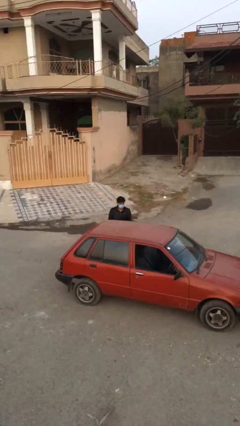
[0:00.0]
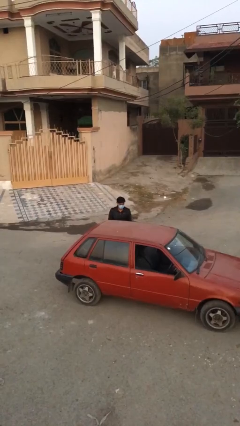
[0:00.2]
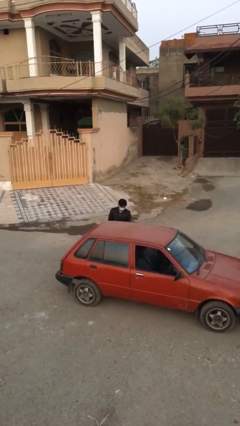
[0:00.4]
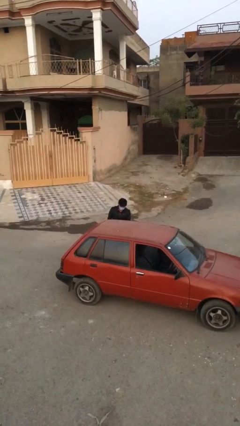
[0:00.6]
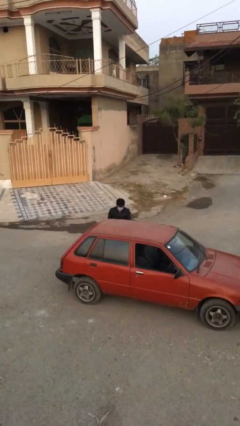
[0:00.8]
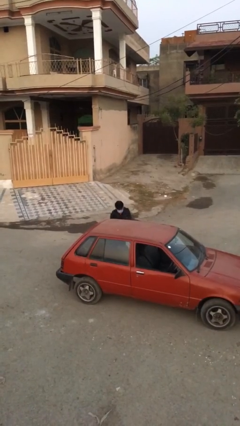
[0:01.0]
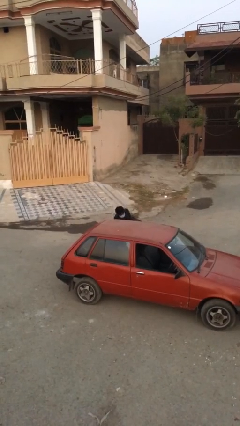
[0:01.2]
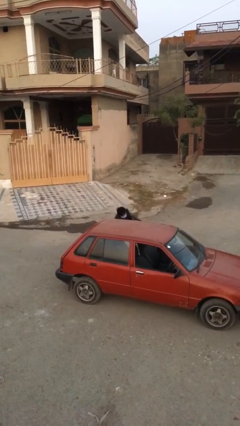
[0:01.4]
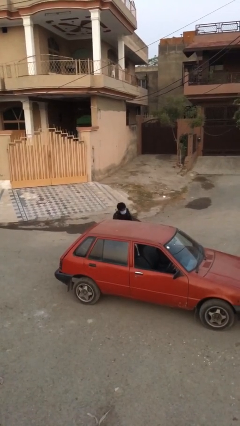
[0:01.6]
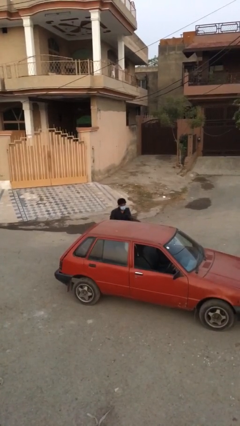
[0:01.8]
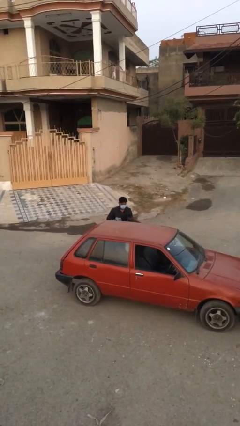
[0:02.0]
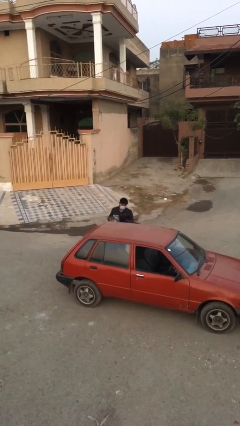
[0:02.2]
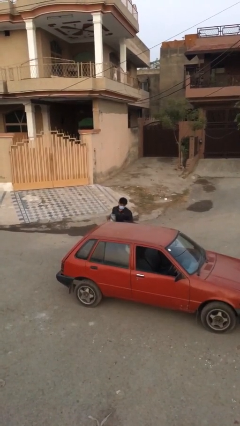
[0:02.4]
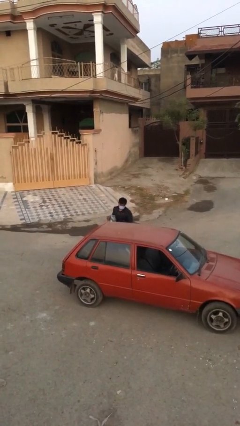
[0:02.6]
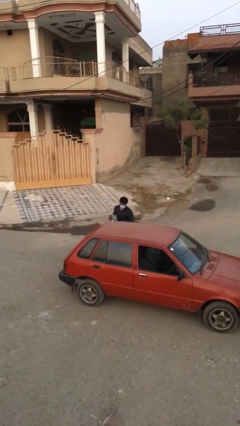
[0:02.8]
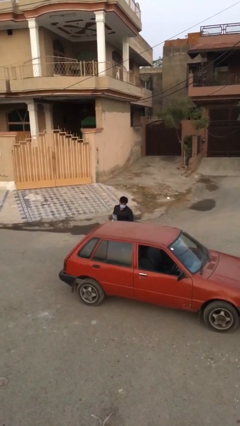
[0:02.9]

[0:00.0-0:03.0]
person unloads car

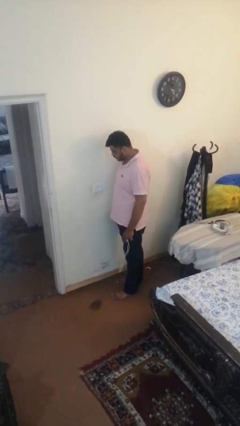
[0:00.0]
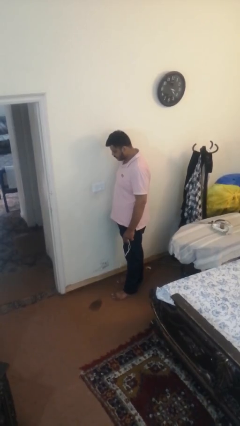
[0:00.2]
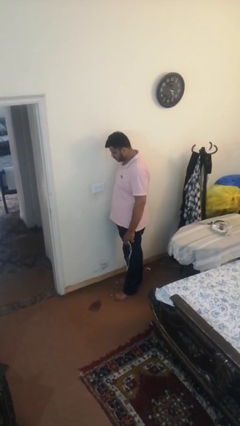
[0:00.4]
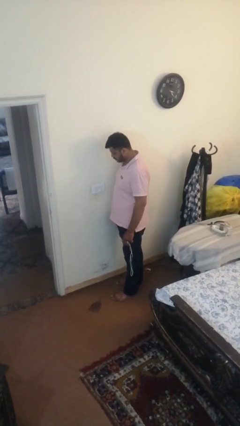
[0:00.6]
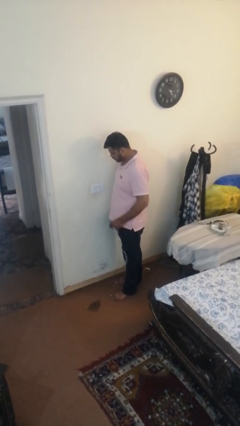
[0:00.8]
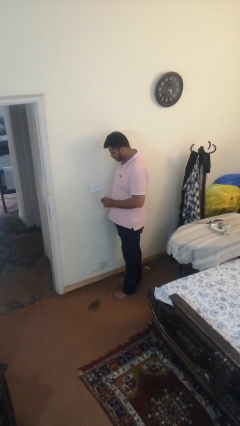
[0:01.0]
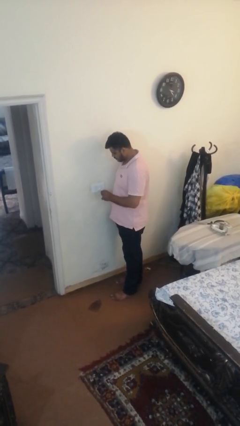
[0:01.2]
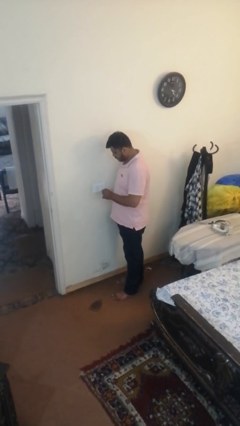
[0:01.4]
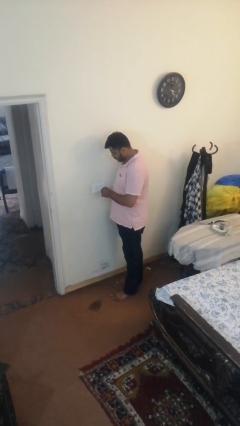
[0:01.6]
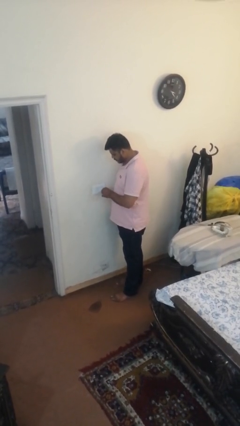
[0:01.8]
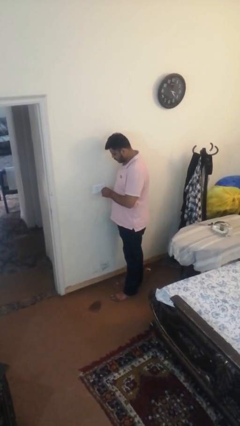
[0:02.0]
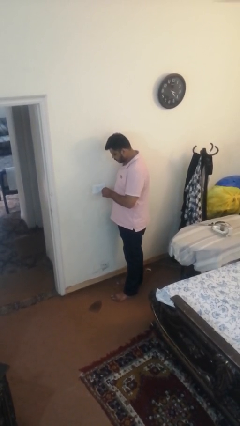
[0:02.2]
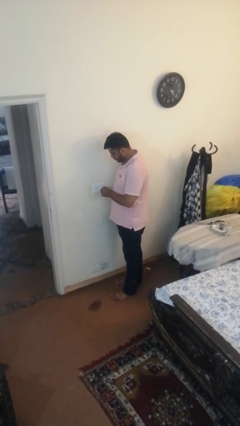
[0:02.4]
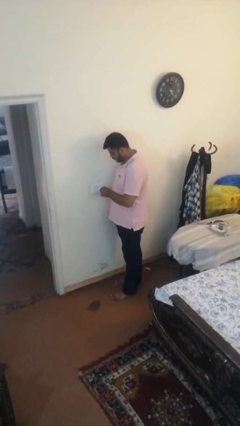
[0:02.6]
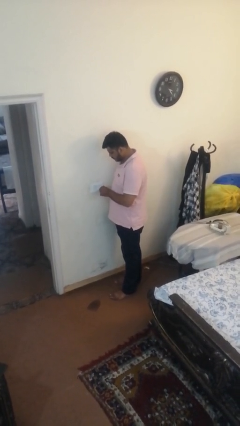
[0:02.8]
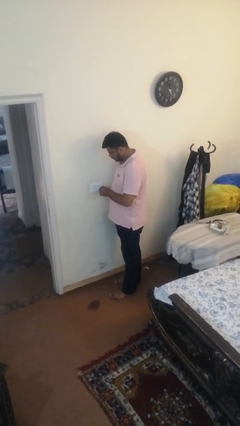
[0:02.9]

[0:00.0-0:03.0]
person plugs into electrical socket

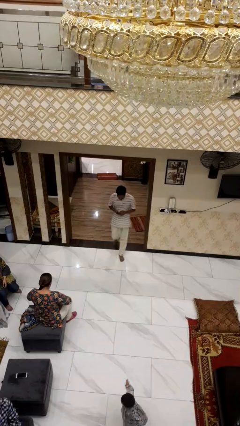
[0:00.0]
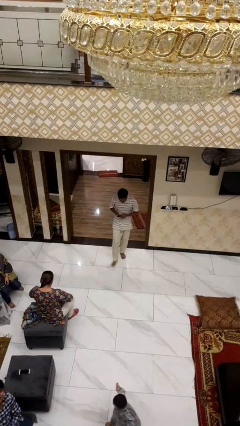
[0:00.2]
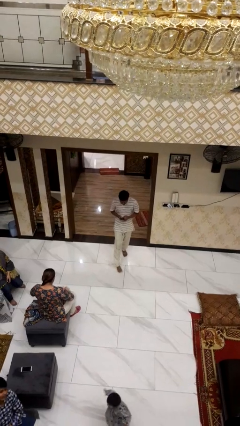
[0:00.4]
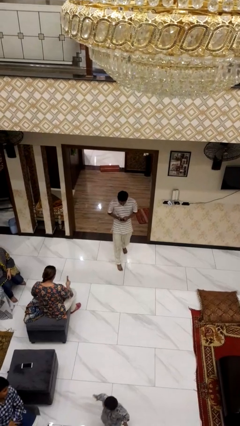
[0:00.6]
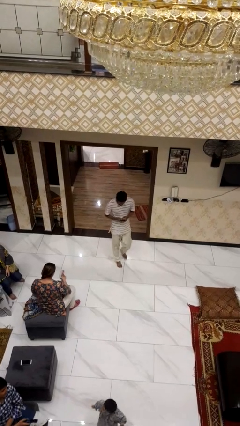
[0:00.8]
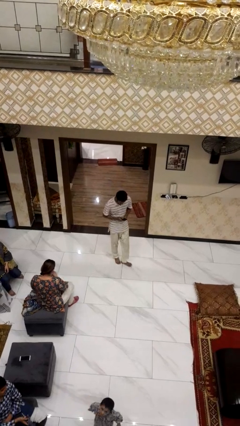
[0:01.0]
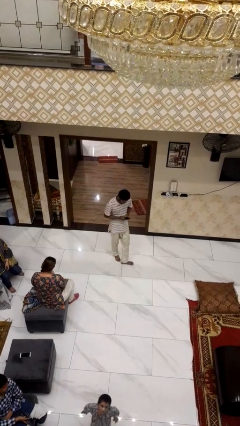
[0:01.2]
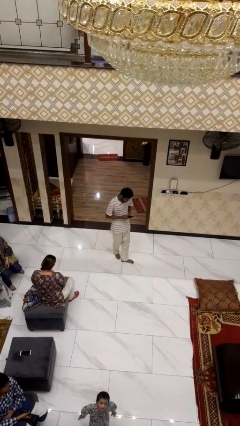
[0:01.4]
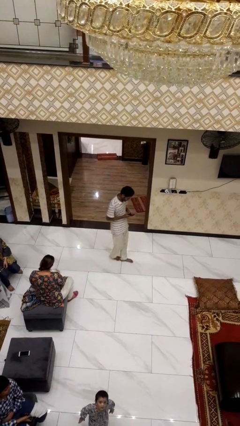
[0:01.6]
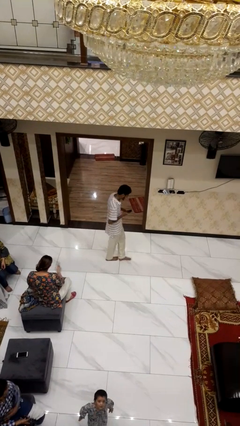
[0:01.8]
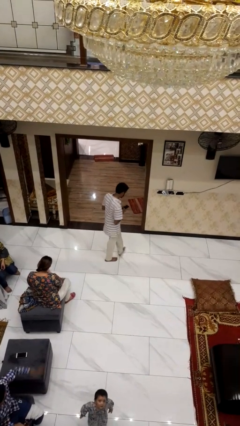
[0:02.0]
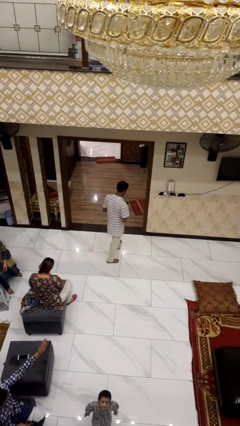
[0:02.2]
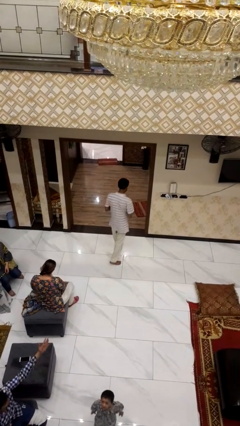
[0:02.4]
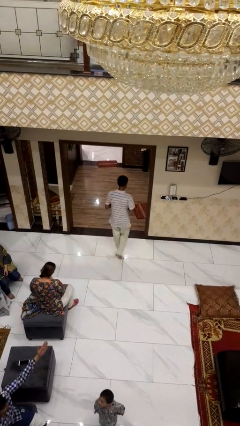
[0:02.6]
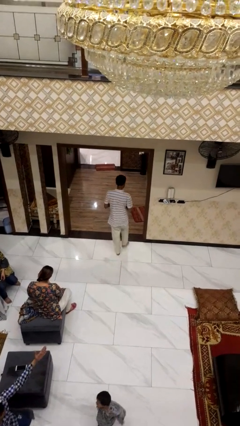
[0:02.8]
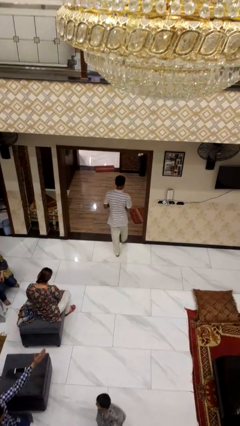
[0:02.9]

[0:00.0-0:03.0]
person enters scene through structure

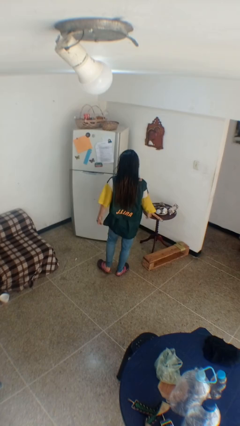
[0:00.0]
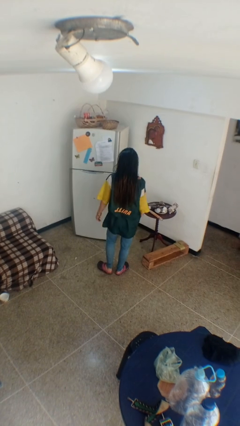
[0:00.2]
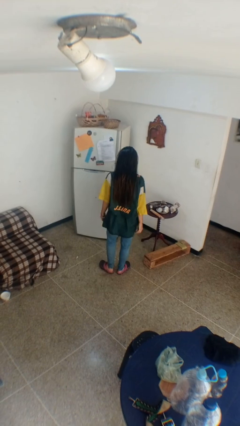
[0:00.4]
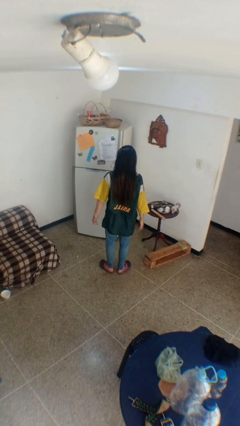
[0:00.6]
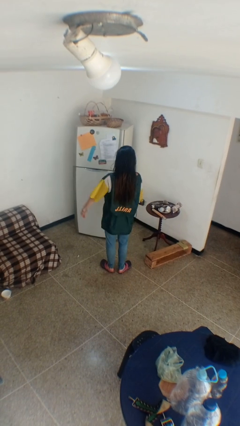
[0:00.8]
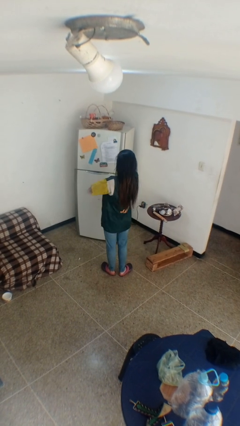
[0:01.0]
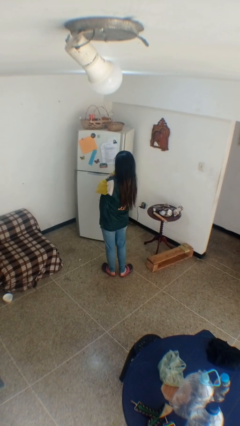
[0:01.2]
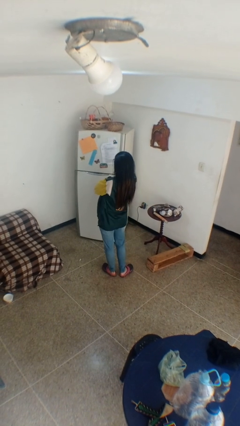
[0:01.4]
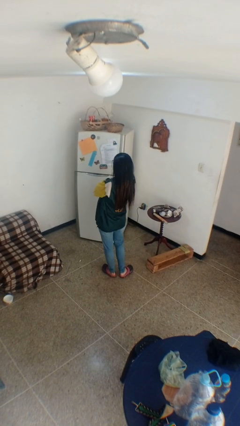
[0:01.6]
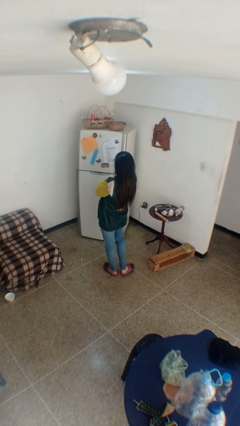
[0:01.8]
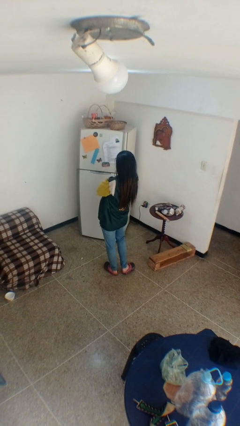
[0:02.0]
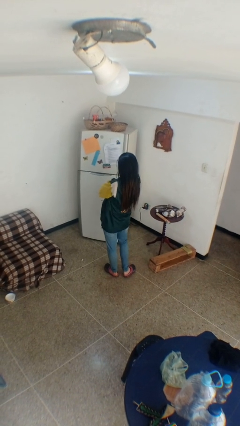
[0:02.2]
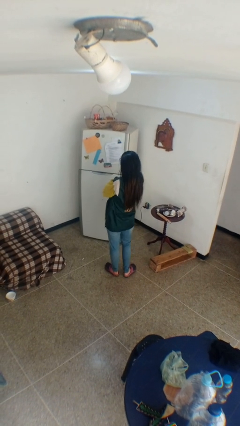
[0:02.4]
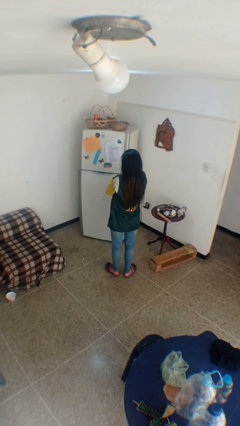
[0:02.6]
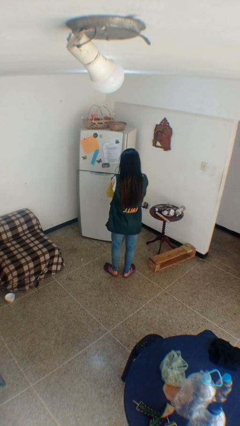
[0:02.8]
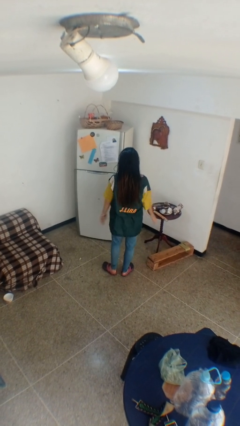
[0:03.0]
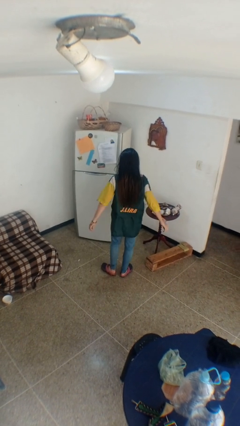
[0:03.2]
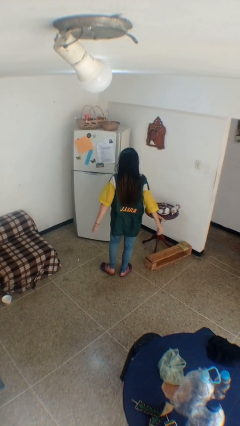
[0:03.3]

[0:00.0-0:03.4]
person gestures arms x

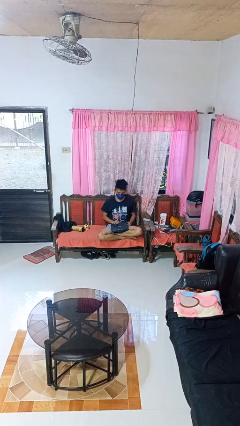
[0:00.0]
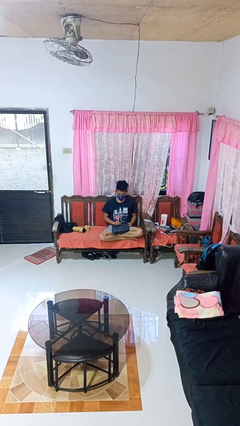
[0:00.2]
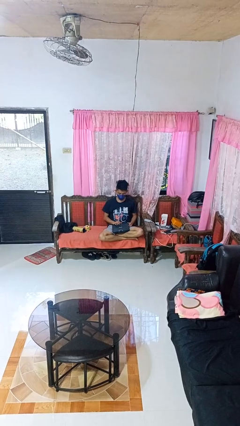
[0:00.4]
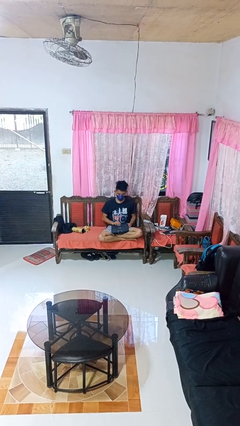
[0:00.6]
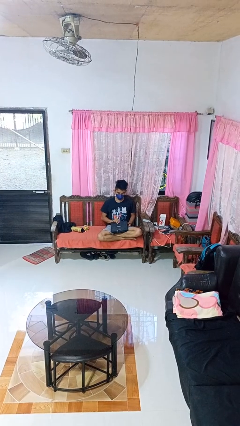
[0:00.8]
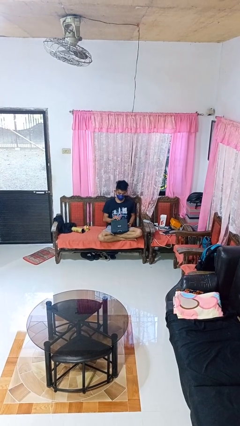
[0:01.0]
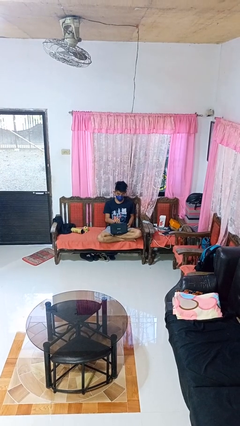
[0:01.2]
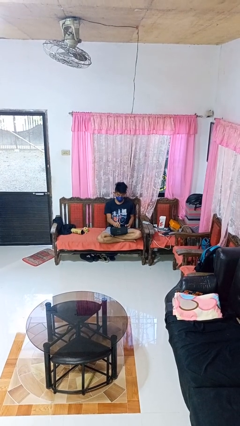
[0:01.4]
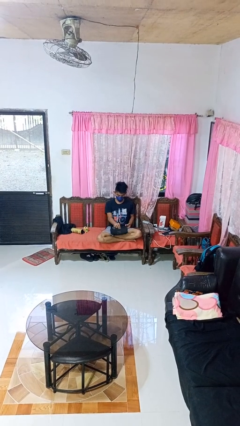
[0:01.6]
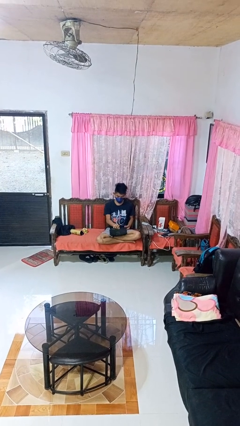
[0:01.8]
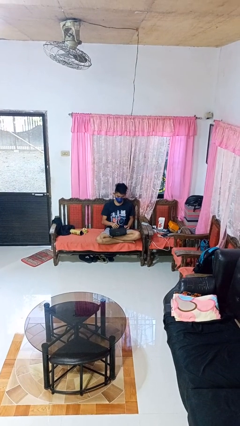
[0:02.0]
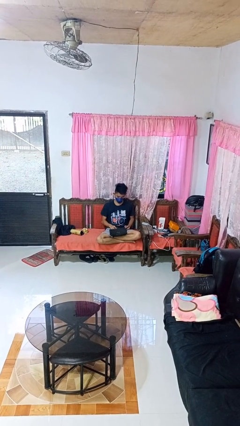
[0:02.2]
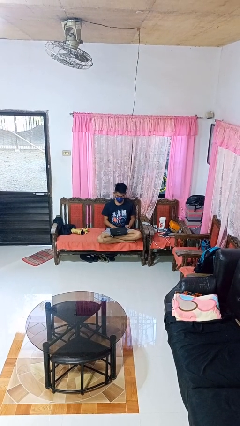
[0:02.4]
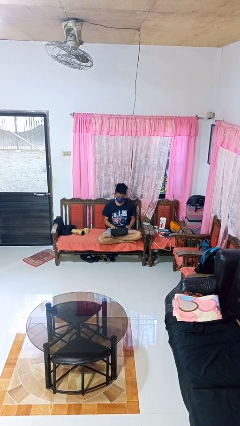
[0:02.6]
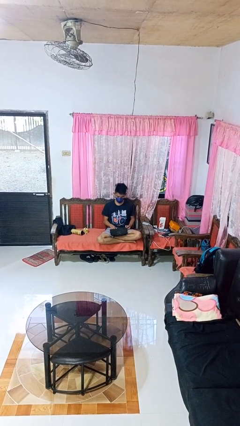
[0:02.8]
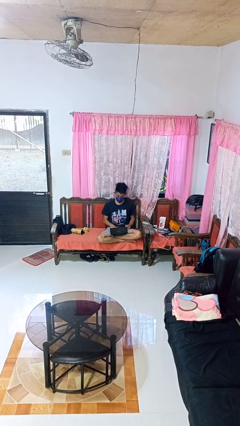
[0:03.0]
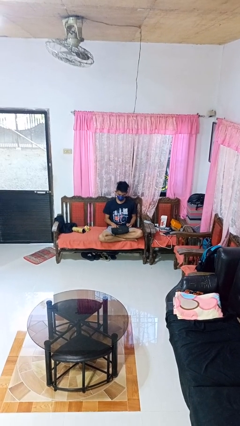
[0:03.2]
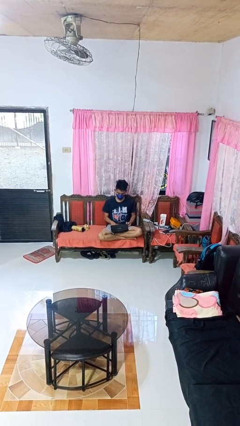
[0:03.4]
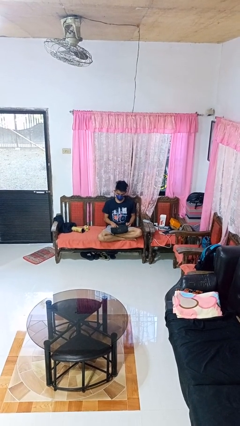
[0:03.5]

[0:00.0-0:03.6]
person opens laptop

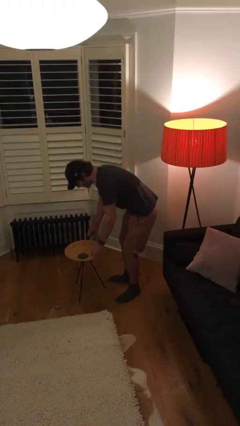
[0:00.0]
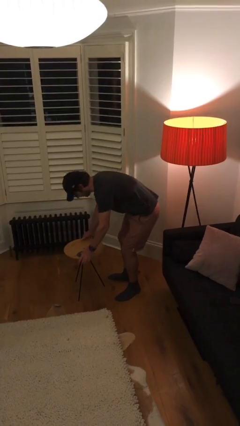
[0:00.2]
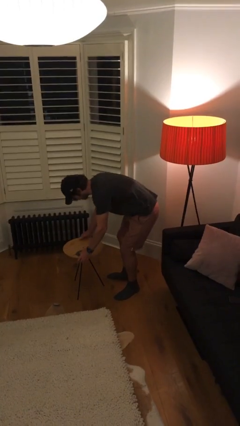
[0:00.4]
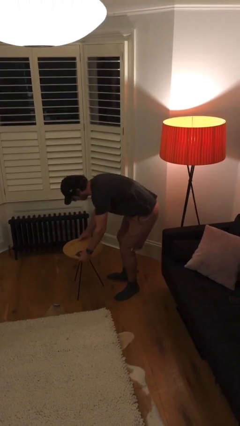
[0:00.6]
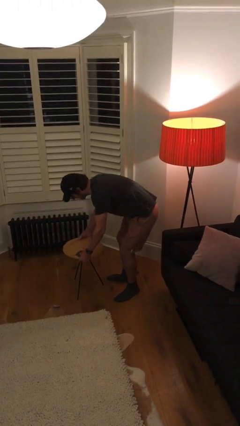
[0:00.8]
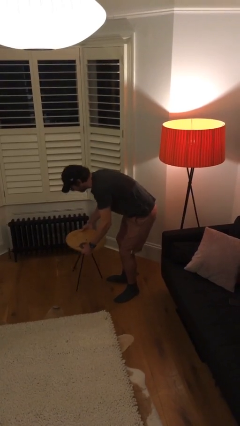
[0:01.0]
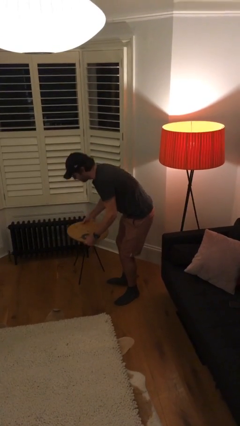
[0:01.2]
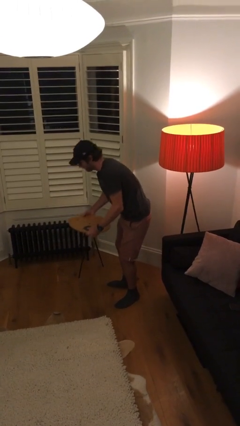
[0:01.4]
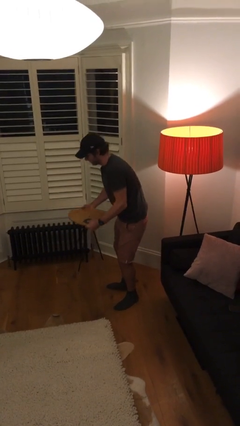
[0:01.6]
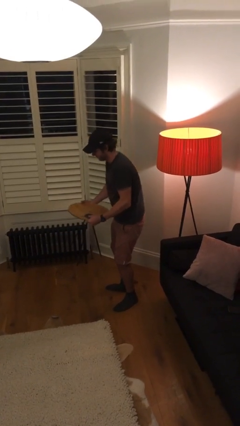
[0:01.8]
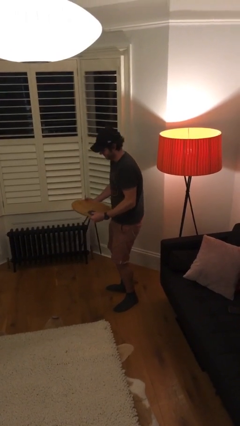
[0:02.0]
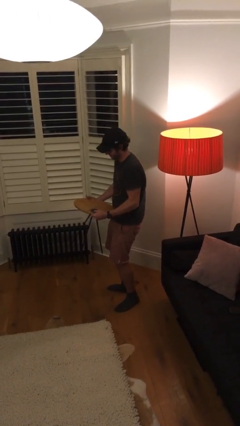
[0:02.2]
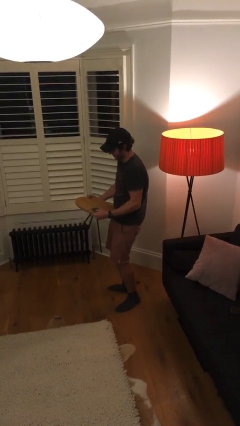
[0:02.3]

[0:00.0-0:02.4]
person picks up object from floor
